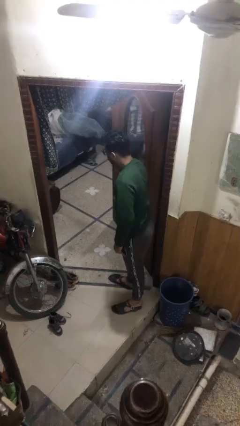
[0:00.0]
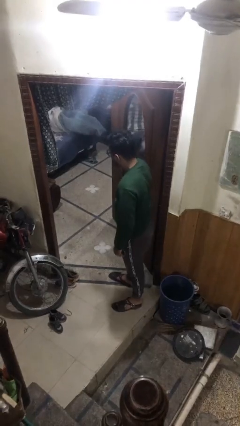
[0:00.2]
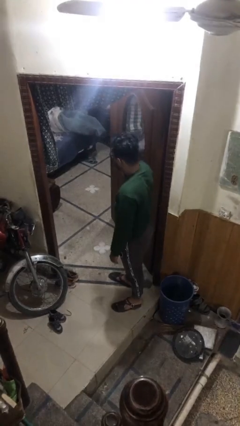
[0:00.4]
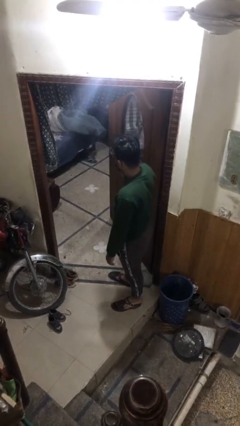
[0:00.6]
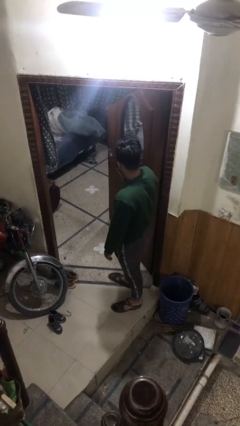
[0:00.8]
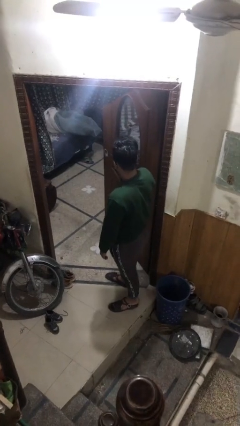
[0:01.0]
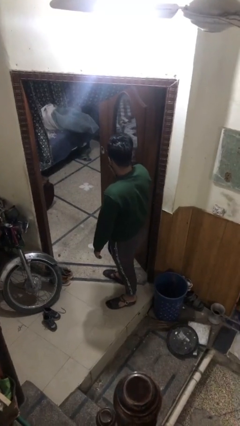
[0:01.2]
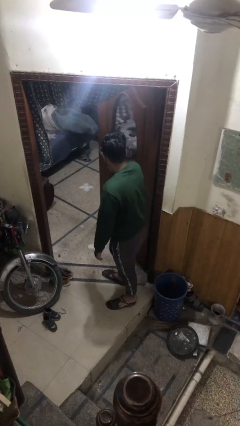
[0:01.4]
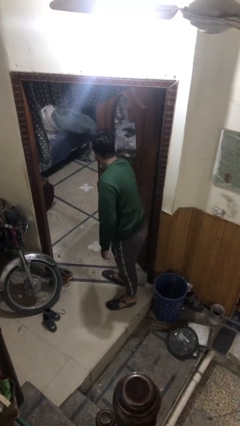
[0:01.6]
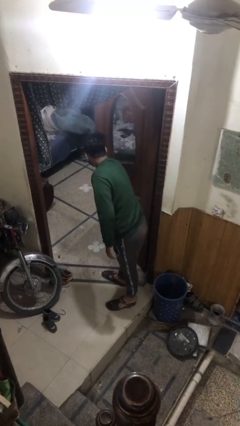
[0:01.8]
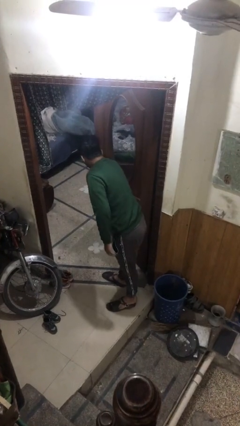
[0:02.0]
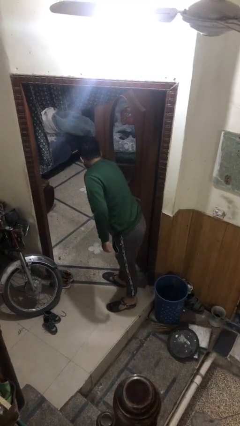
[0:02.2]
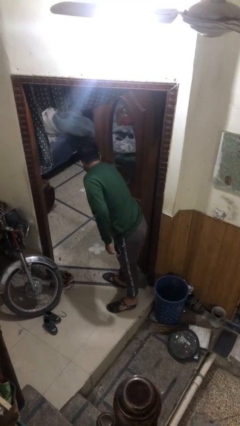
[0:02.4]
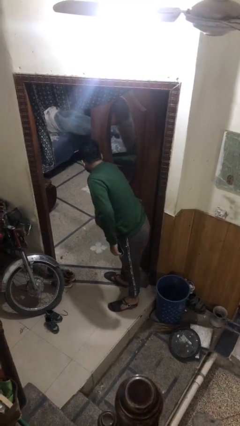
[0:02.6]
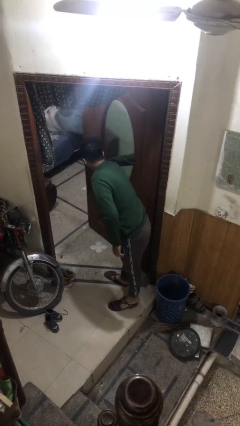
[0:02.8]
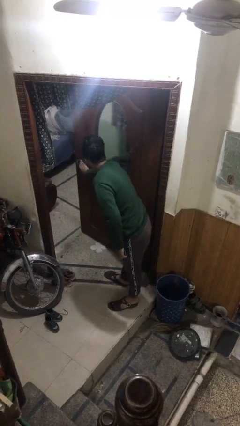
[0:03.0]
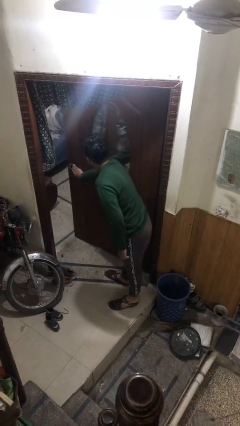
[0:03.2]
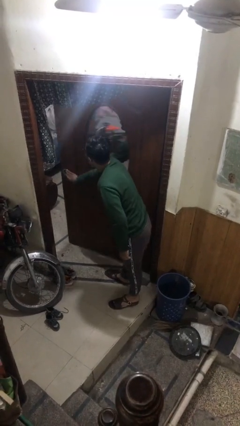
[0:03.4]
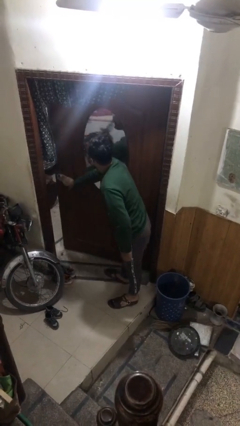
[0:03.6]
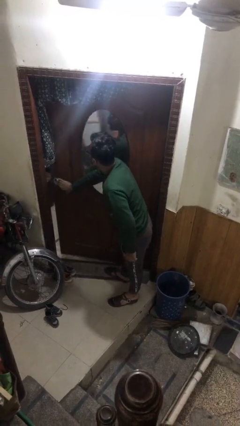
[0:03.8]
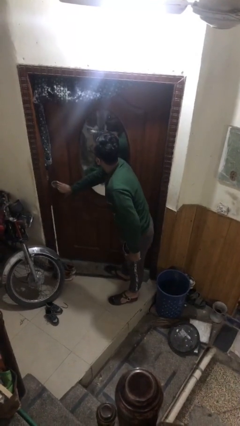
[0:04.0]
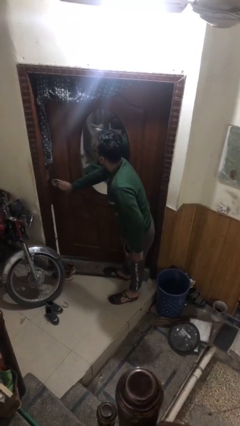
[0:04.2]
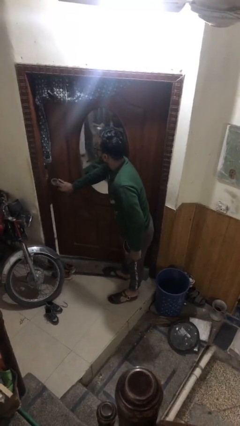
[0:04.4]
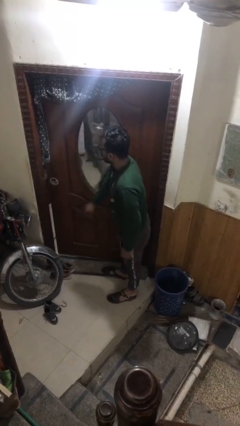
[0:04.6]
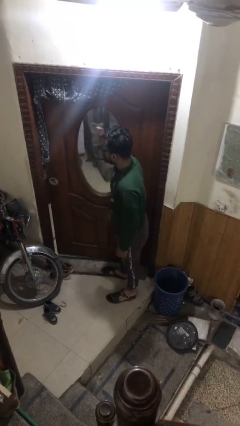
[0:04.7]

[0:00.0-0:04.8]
person closes facility door

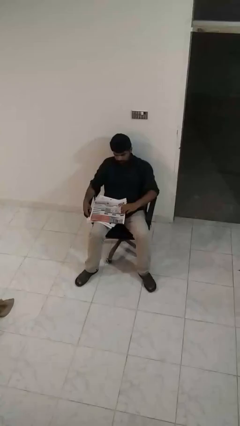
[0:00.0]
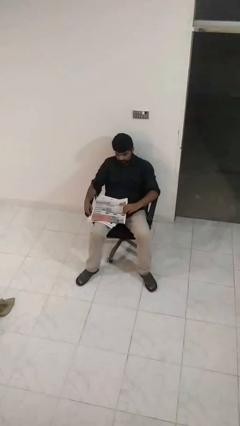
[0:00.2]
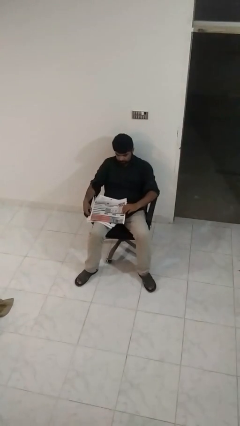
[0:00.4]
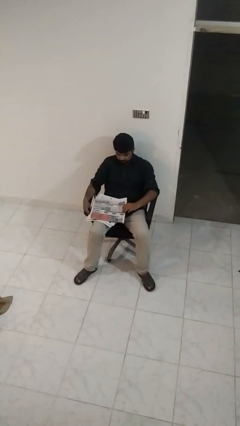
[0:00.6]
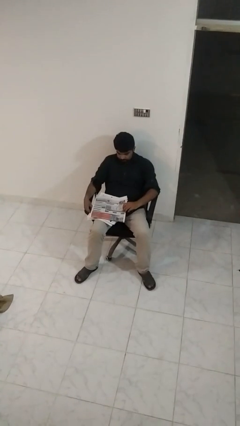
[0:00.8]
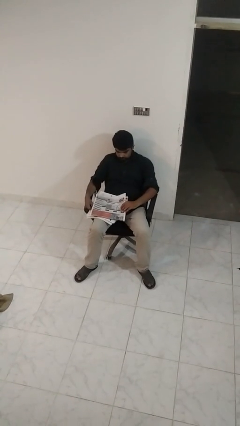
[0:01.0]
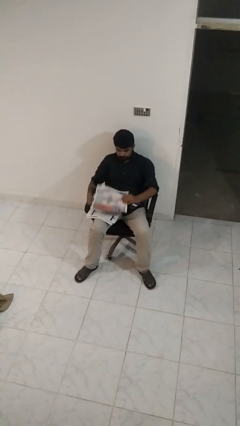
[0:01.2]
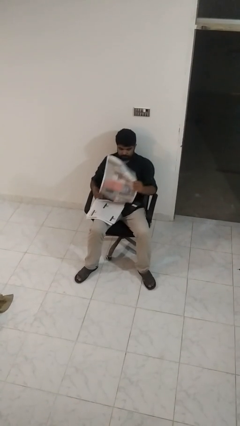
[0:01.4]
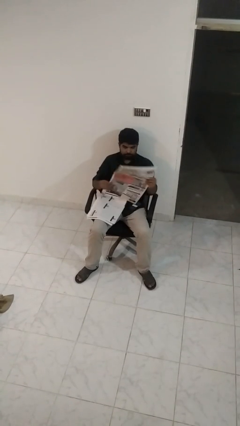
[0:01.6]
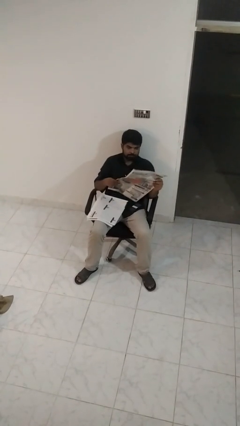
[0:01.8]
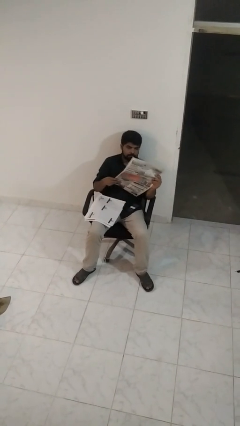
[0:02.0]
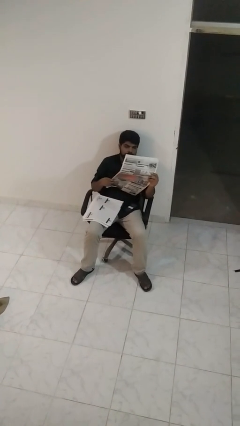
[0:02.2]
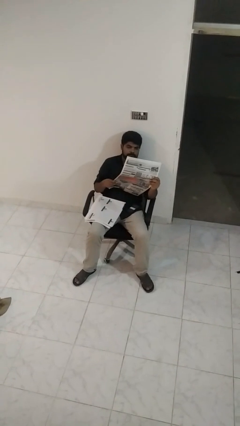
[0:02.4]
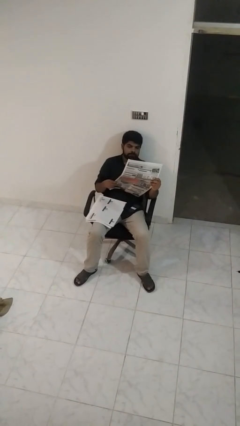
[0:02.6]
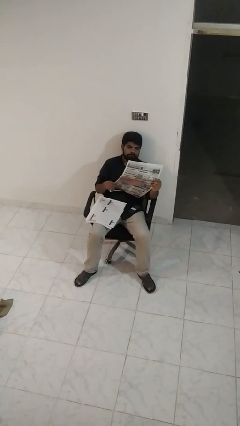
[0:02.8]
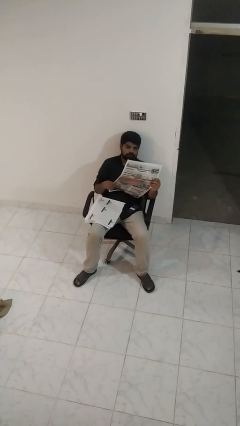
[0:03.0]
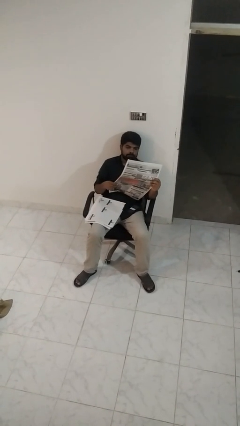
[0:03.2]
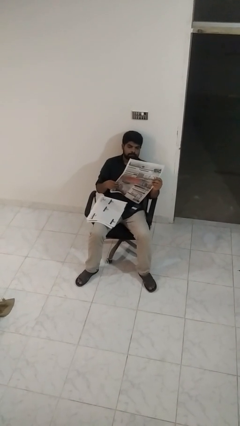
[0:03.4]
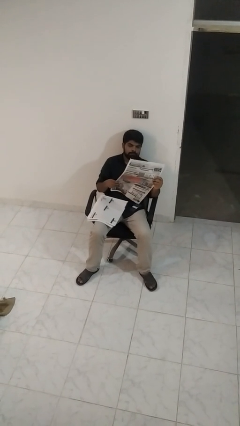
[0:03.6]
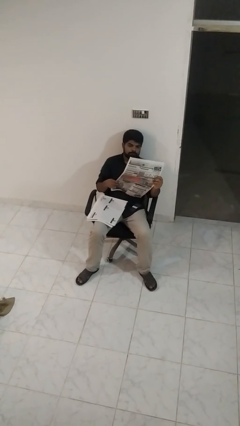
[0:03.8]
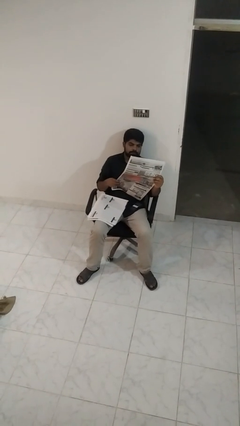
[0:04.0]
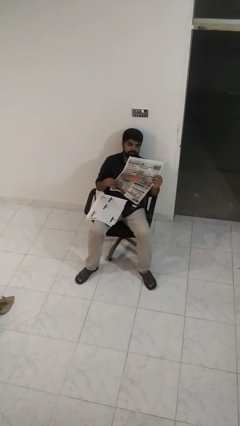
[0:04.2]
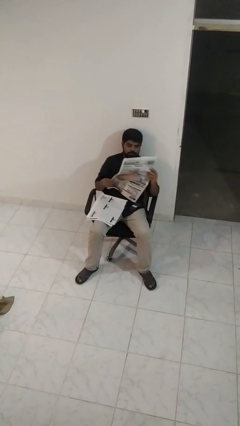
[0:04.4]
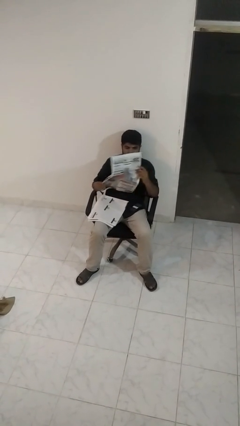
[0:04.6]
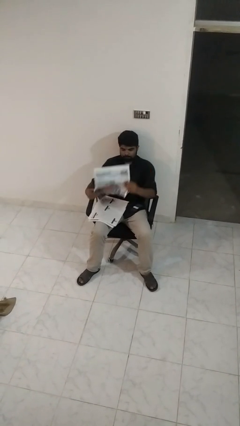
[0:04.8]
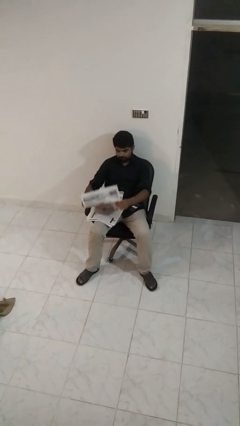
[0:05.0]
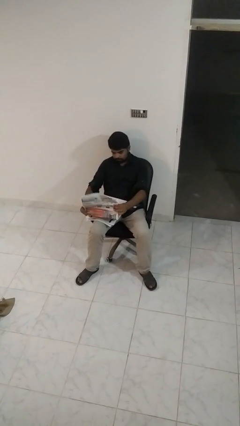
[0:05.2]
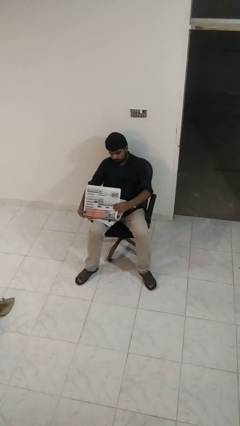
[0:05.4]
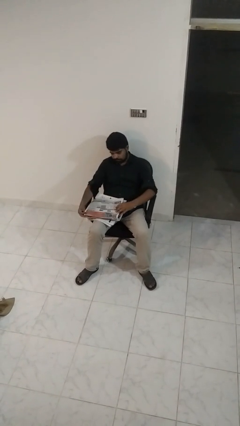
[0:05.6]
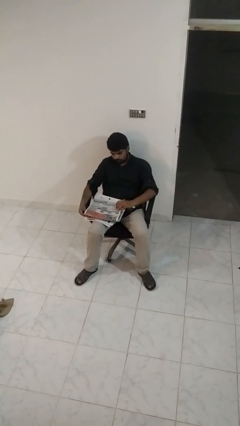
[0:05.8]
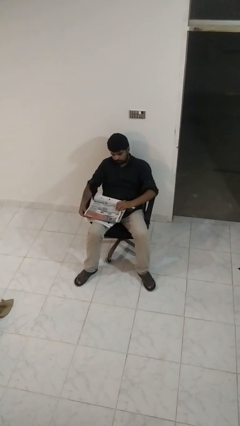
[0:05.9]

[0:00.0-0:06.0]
person reads newspaper

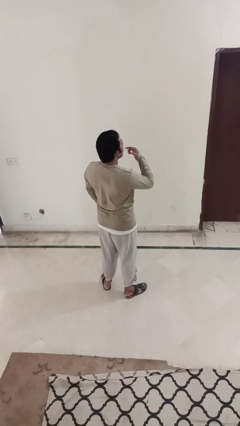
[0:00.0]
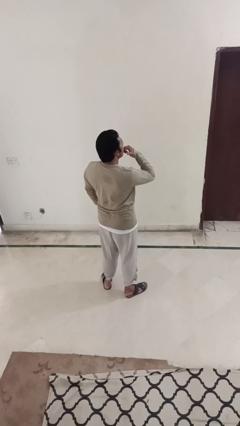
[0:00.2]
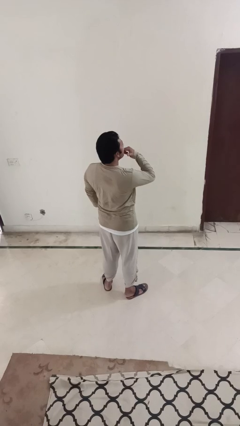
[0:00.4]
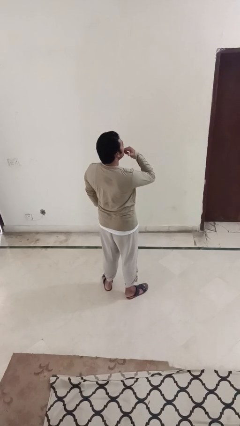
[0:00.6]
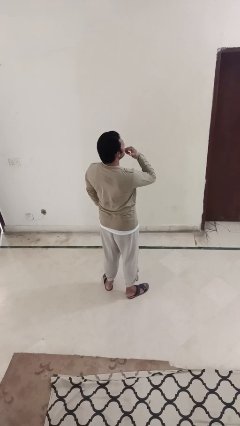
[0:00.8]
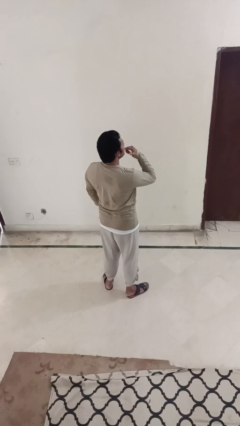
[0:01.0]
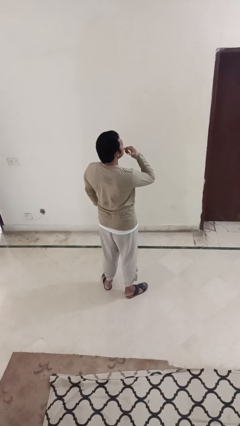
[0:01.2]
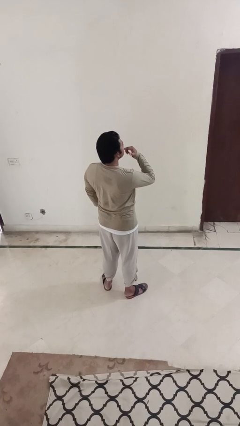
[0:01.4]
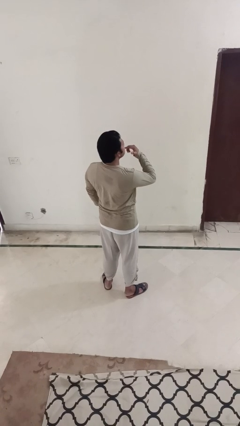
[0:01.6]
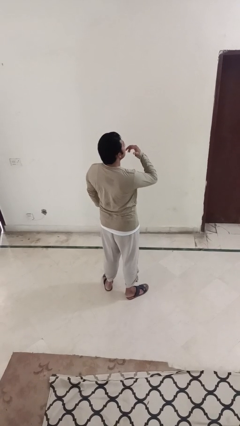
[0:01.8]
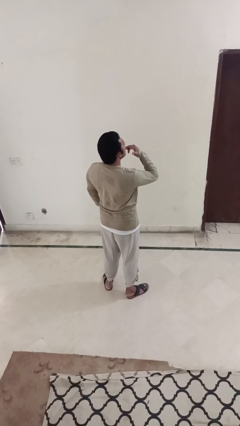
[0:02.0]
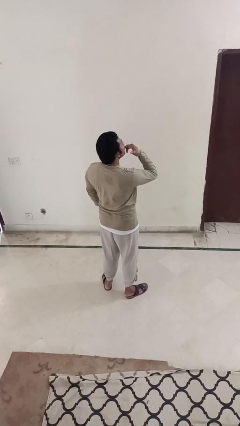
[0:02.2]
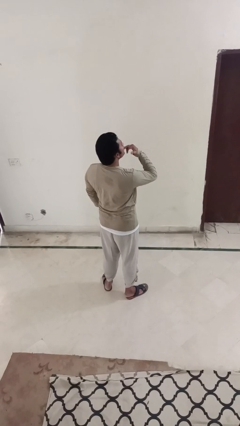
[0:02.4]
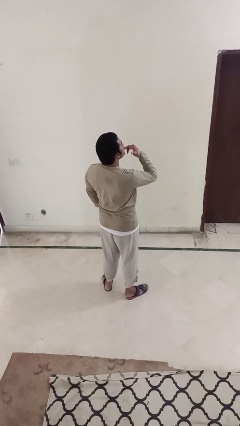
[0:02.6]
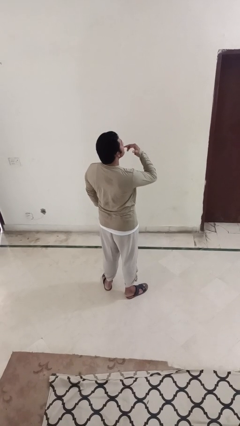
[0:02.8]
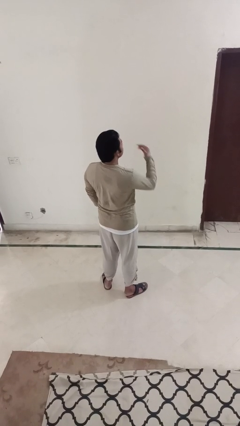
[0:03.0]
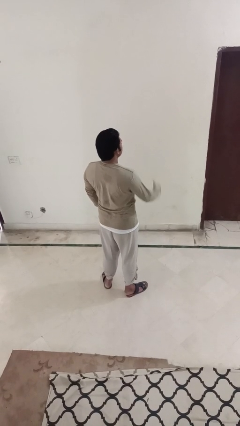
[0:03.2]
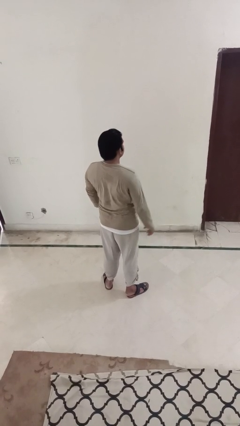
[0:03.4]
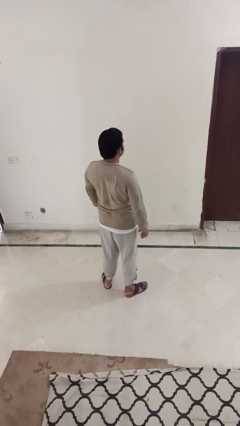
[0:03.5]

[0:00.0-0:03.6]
person licks fingers

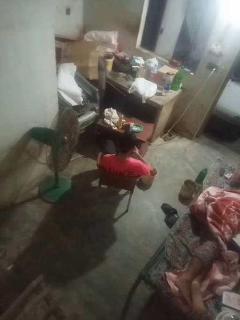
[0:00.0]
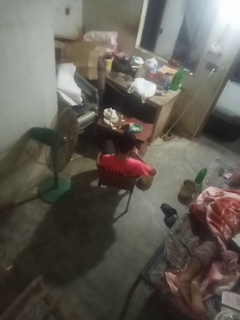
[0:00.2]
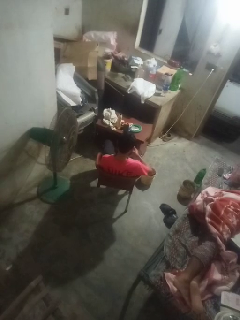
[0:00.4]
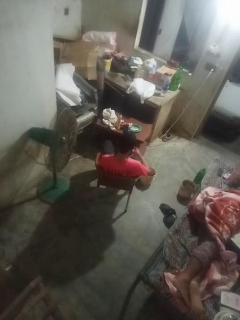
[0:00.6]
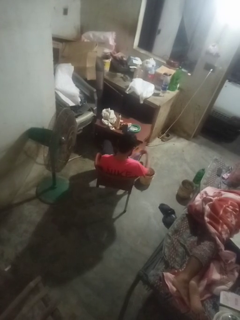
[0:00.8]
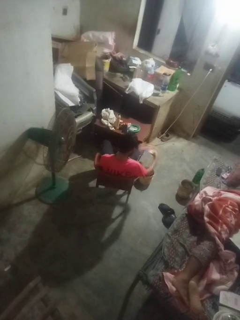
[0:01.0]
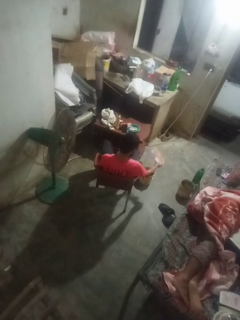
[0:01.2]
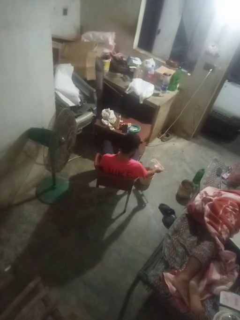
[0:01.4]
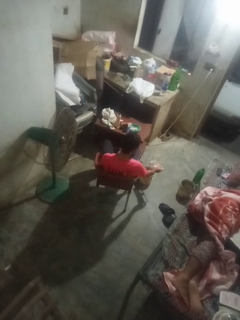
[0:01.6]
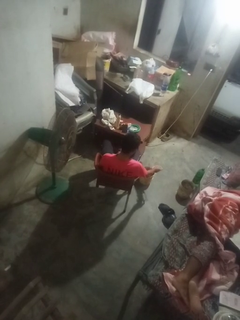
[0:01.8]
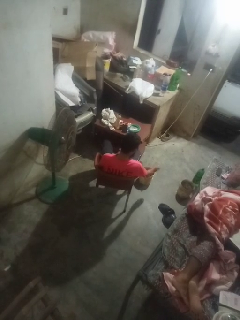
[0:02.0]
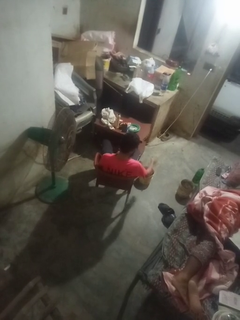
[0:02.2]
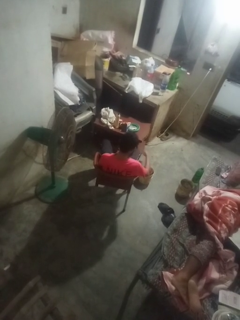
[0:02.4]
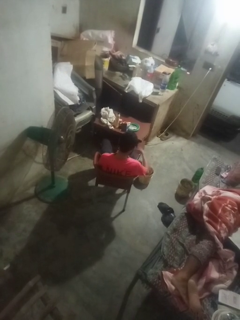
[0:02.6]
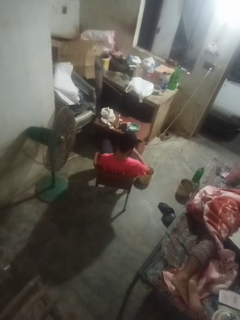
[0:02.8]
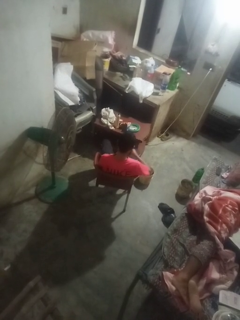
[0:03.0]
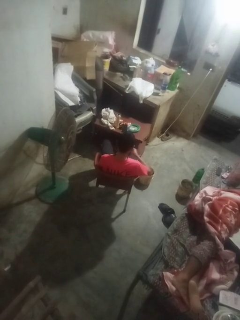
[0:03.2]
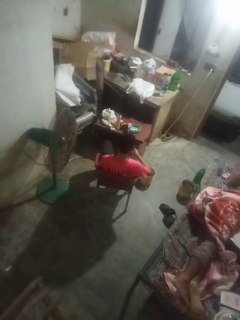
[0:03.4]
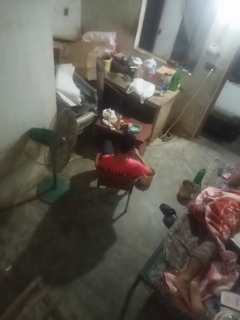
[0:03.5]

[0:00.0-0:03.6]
person discards trash

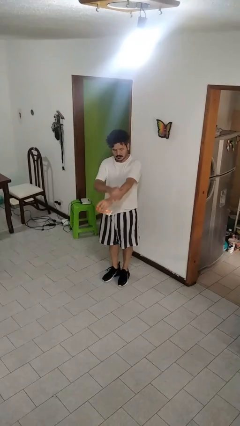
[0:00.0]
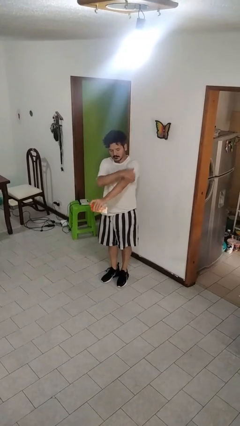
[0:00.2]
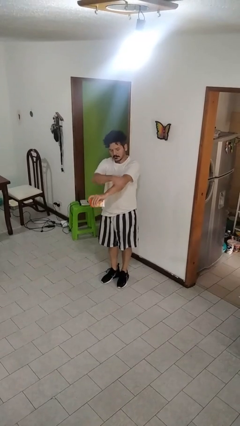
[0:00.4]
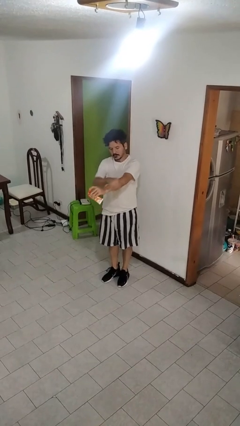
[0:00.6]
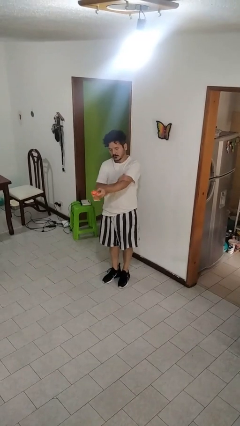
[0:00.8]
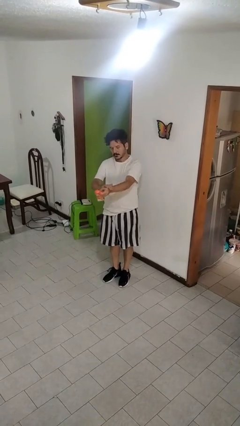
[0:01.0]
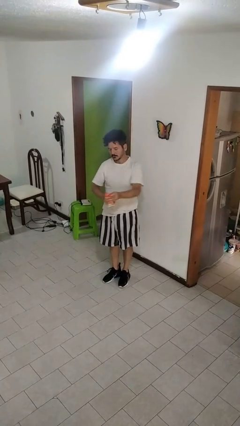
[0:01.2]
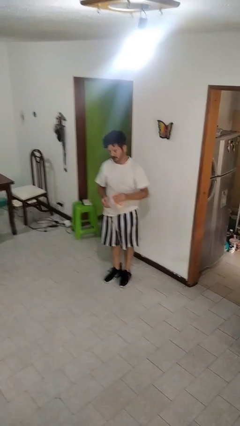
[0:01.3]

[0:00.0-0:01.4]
person applies sunscreen
